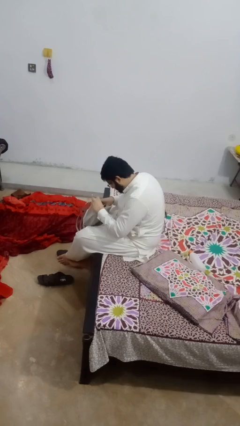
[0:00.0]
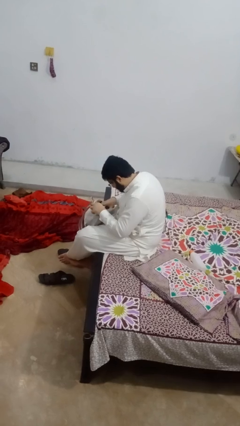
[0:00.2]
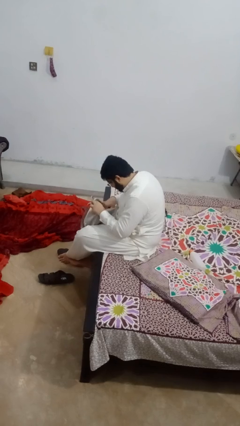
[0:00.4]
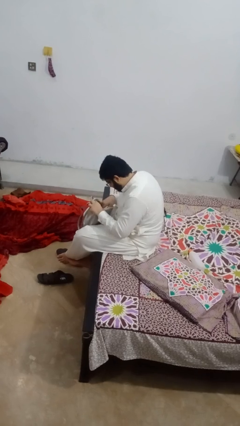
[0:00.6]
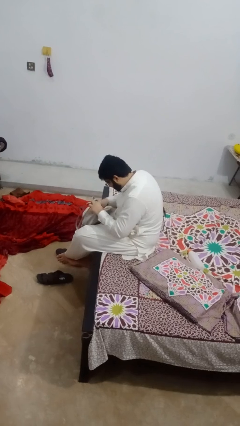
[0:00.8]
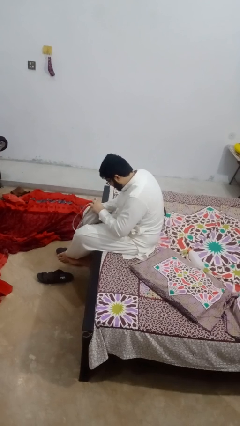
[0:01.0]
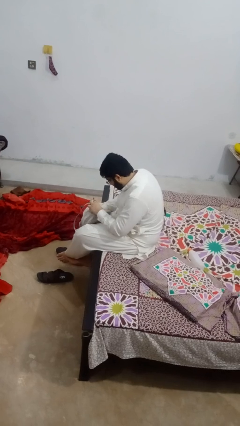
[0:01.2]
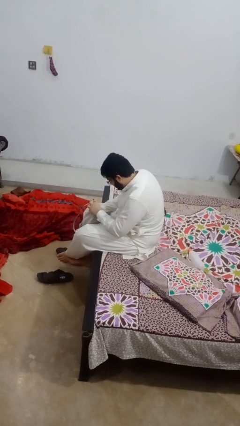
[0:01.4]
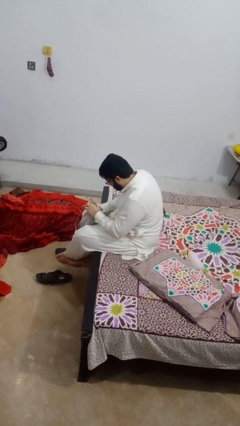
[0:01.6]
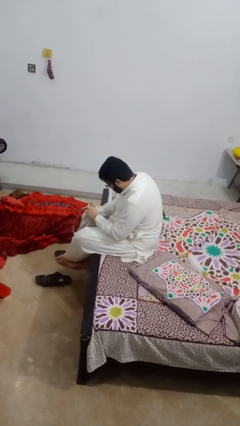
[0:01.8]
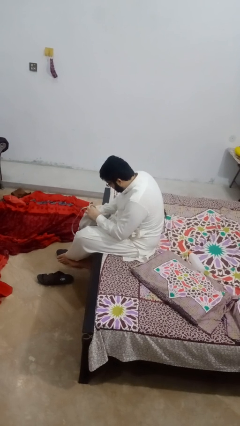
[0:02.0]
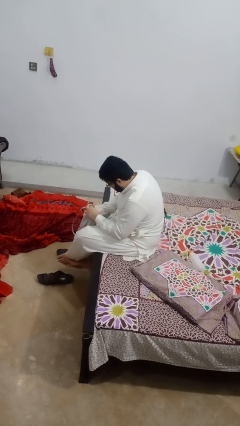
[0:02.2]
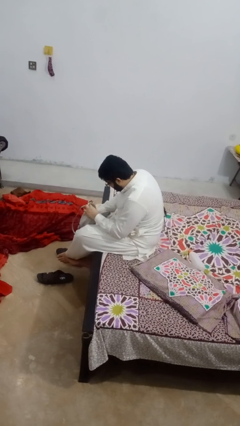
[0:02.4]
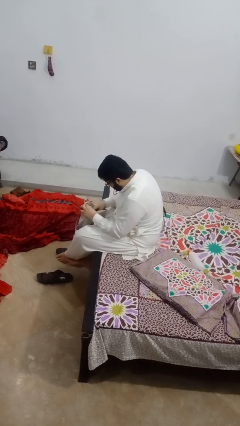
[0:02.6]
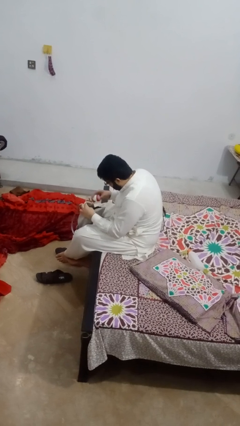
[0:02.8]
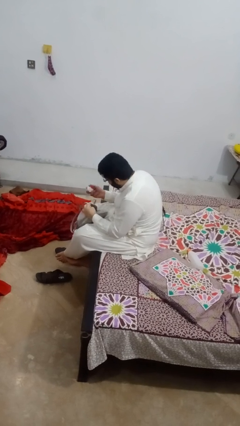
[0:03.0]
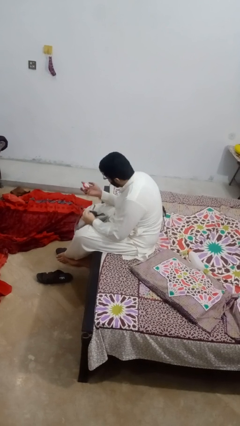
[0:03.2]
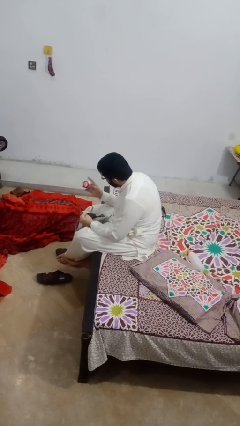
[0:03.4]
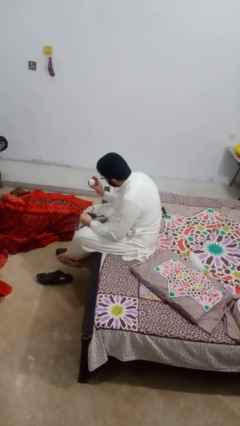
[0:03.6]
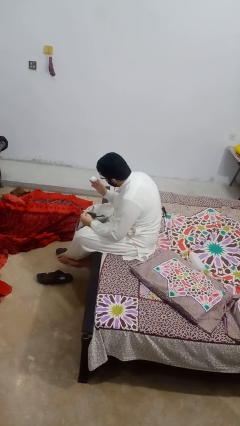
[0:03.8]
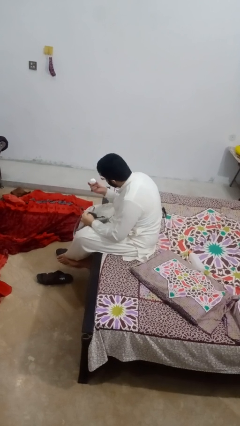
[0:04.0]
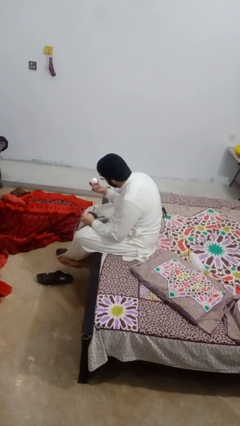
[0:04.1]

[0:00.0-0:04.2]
person takes object from purse

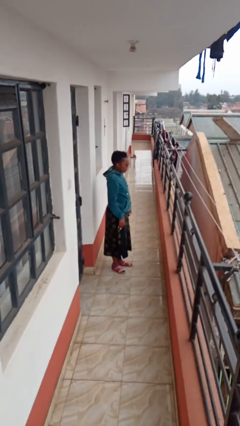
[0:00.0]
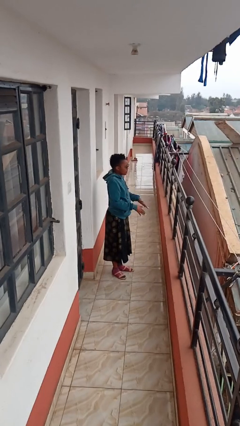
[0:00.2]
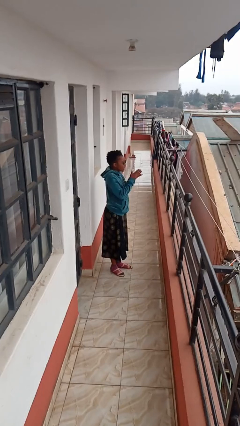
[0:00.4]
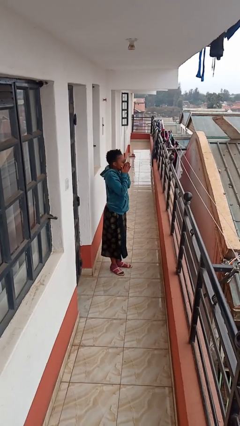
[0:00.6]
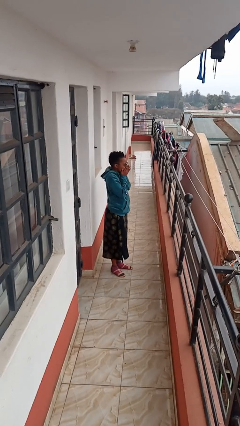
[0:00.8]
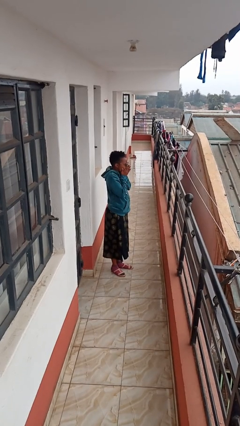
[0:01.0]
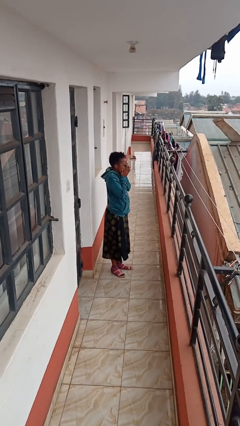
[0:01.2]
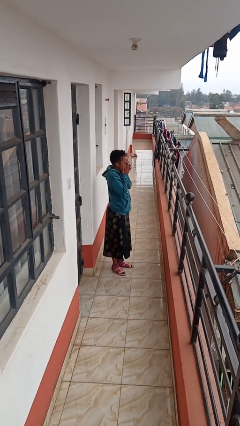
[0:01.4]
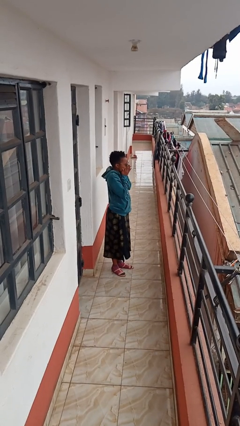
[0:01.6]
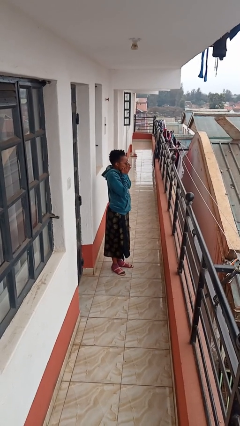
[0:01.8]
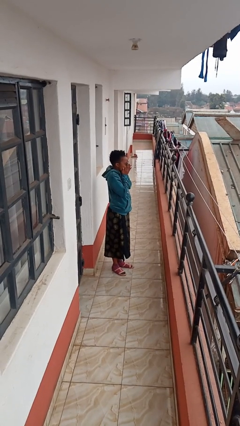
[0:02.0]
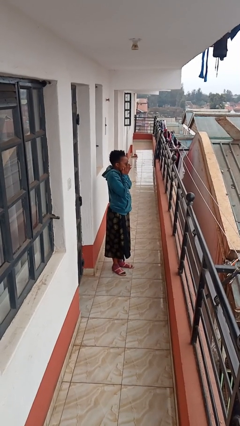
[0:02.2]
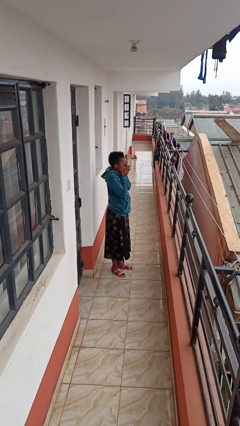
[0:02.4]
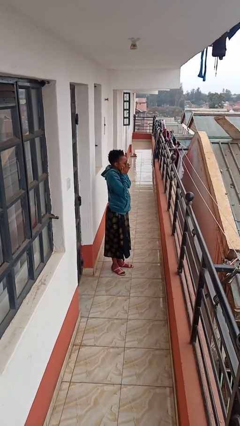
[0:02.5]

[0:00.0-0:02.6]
person blows into hands

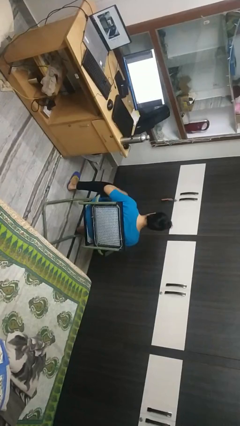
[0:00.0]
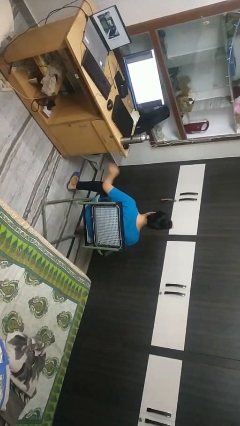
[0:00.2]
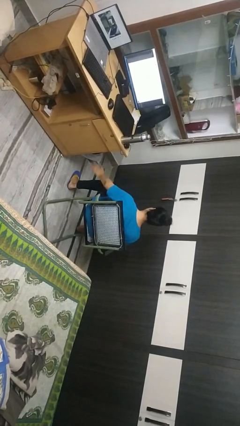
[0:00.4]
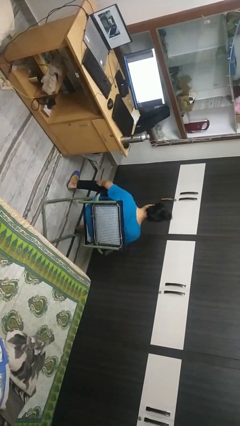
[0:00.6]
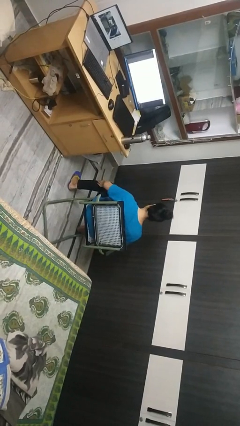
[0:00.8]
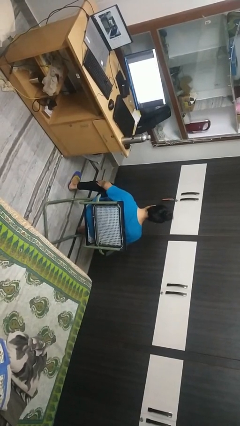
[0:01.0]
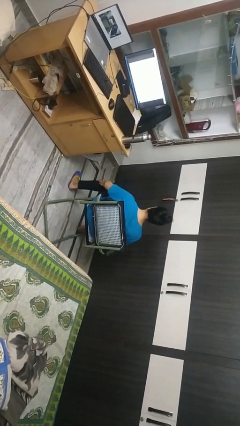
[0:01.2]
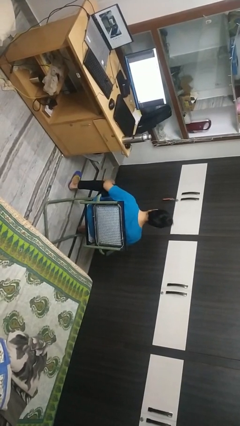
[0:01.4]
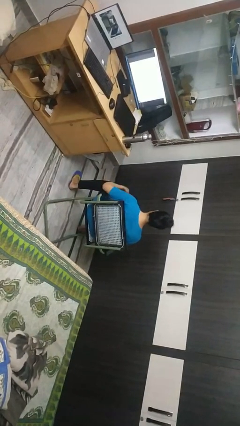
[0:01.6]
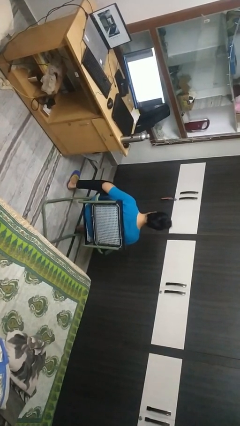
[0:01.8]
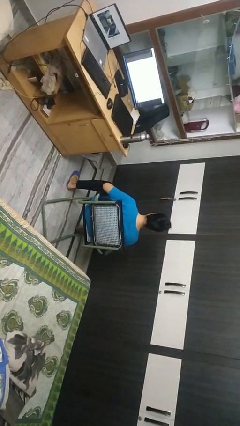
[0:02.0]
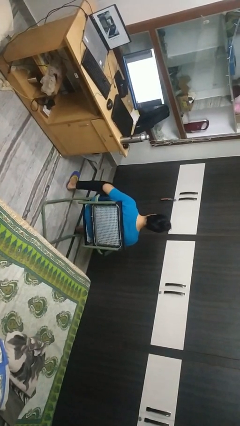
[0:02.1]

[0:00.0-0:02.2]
person swats bug

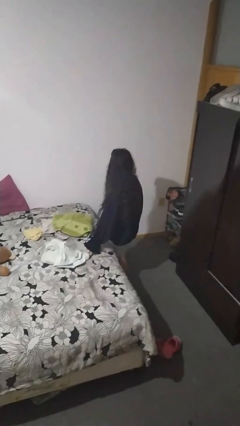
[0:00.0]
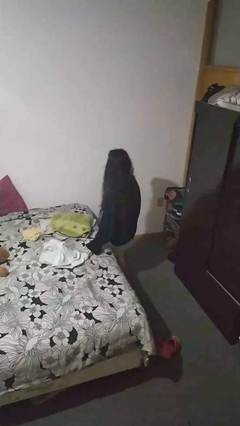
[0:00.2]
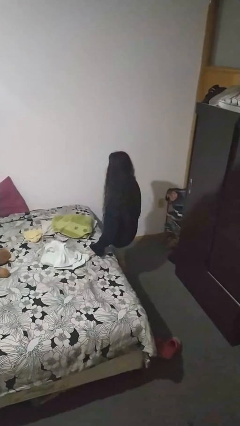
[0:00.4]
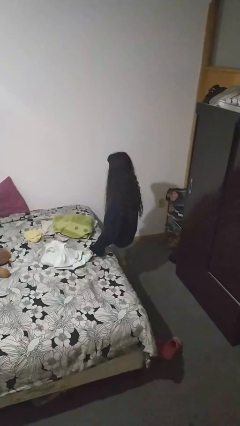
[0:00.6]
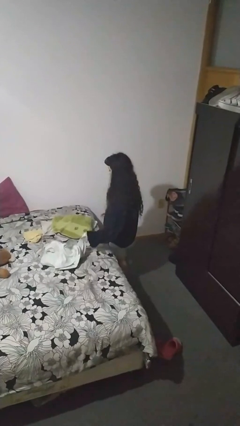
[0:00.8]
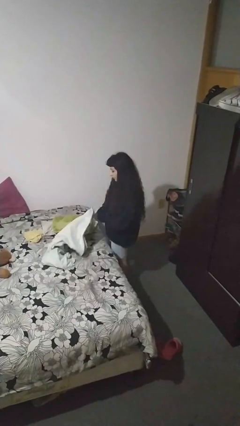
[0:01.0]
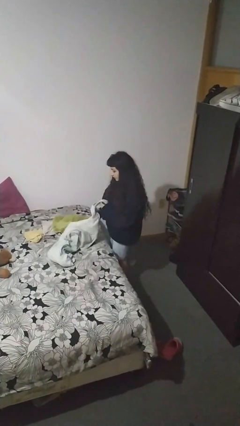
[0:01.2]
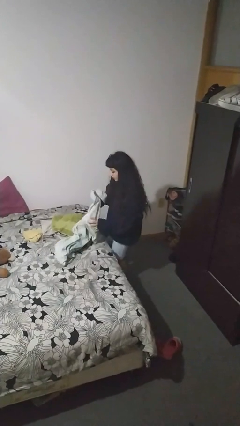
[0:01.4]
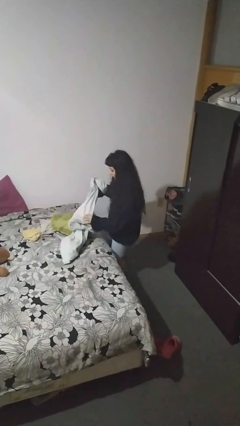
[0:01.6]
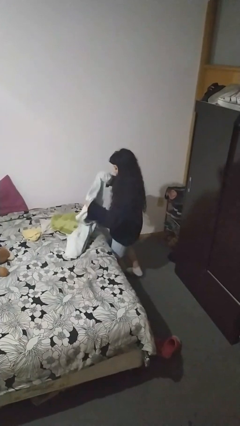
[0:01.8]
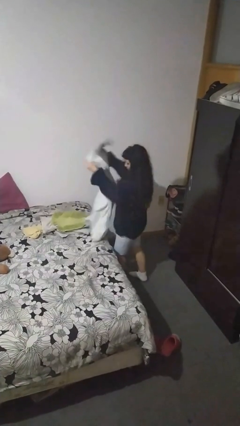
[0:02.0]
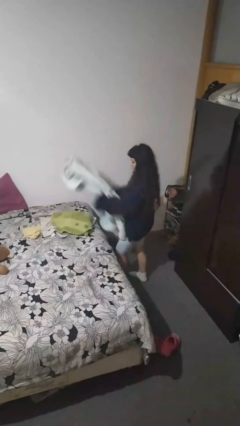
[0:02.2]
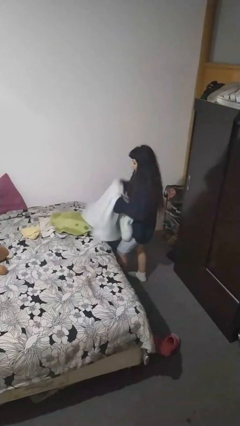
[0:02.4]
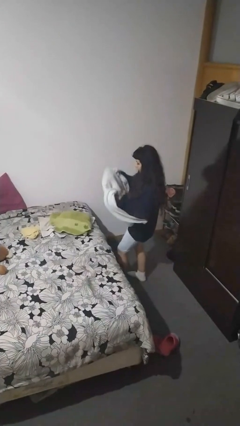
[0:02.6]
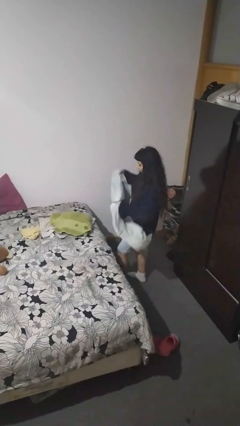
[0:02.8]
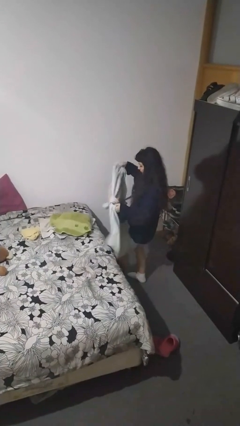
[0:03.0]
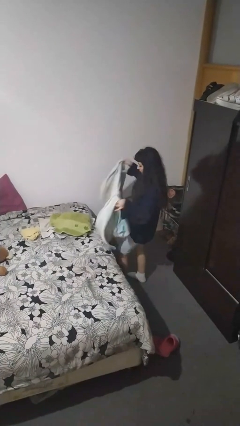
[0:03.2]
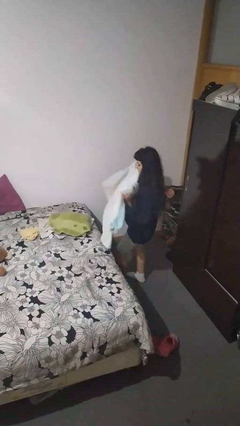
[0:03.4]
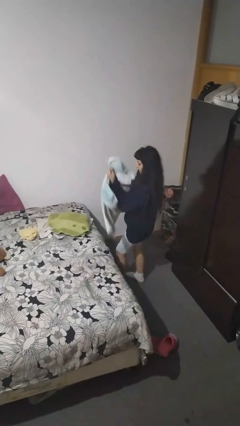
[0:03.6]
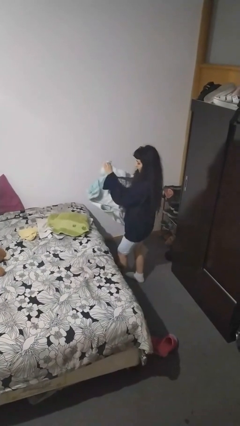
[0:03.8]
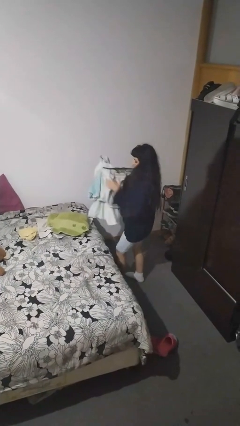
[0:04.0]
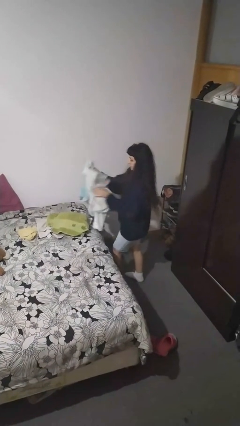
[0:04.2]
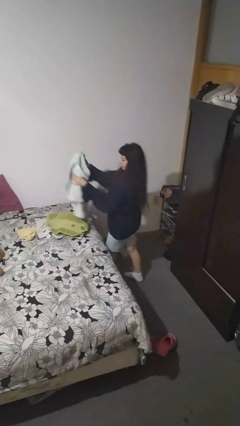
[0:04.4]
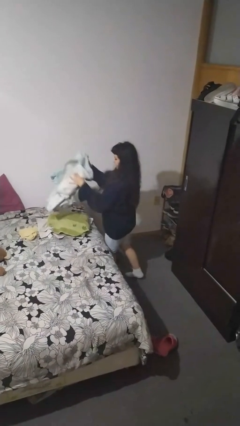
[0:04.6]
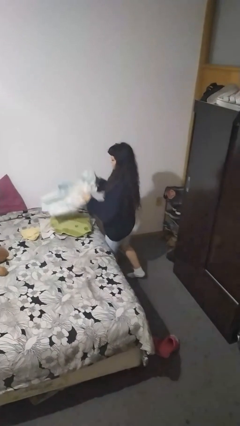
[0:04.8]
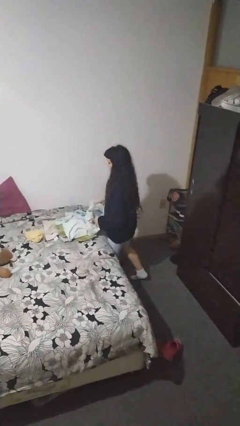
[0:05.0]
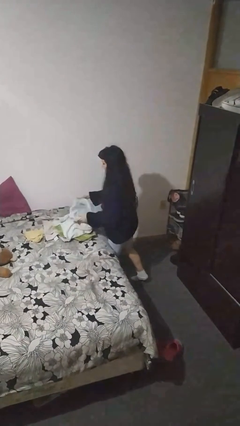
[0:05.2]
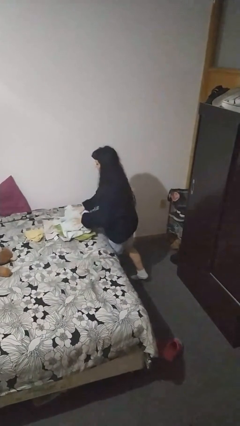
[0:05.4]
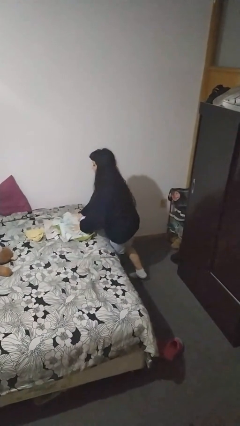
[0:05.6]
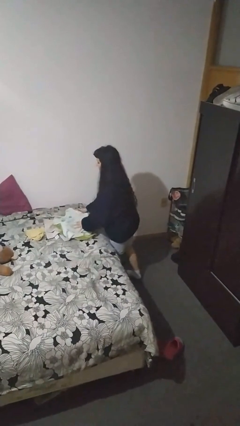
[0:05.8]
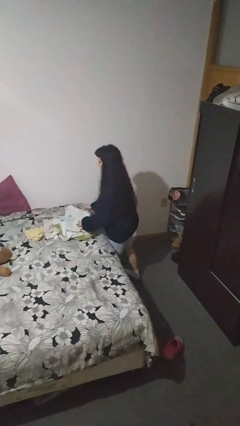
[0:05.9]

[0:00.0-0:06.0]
person folds towel

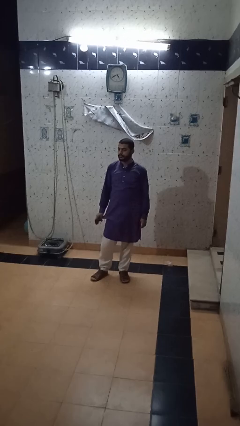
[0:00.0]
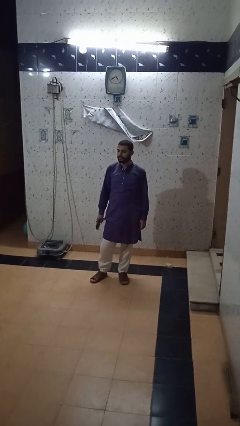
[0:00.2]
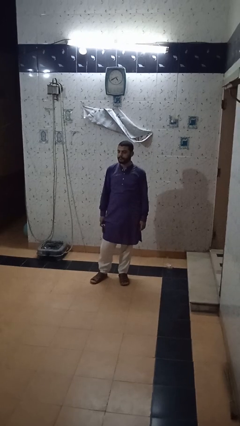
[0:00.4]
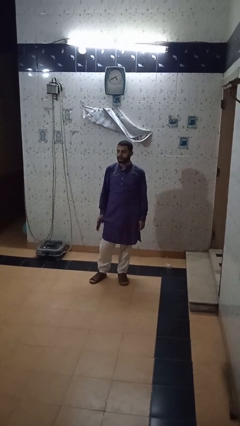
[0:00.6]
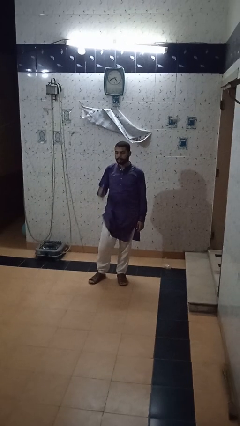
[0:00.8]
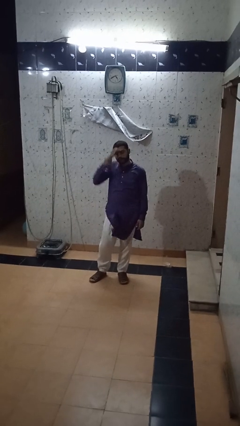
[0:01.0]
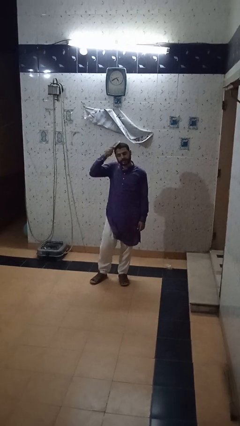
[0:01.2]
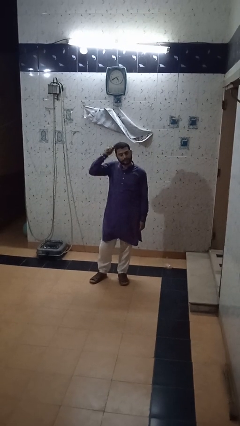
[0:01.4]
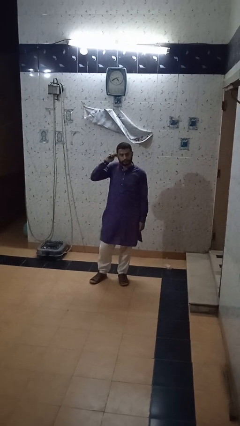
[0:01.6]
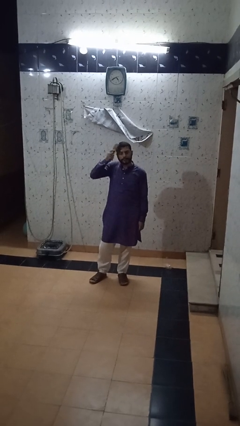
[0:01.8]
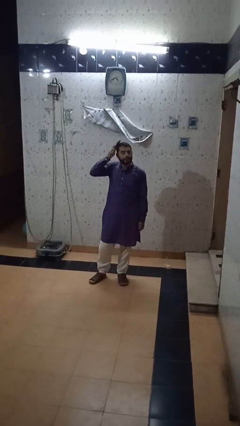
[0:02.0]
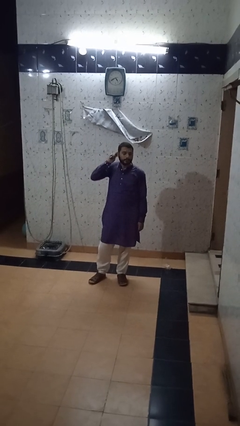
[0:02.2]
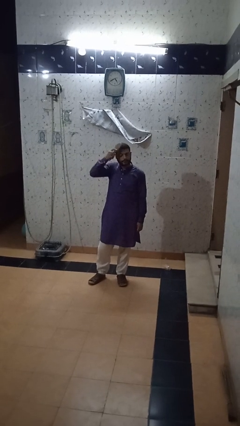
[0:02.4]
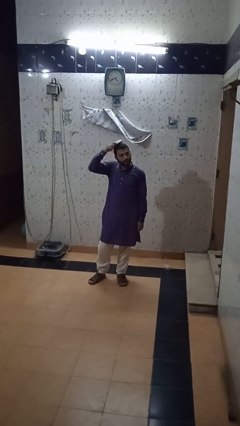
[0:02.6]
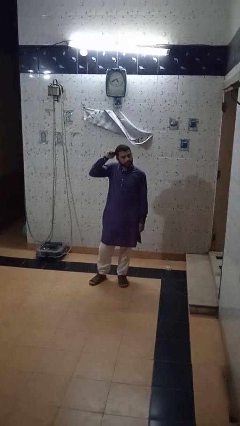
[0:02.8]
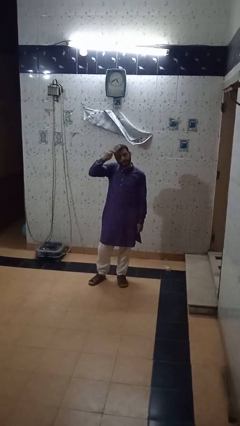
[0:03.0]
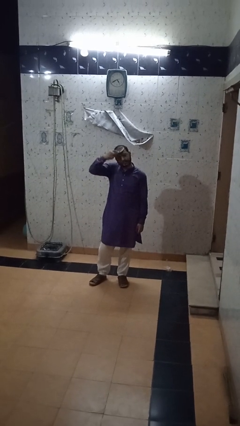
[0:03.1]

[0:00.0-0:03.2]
person brushes hair
